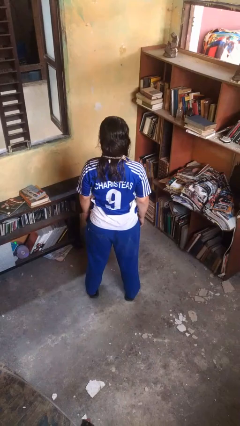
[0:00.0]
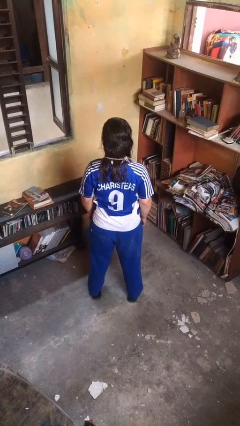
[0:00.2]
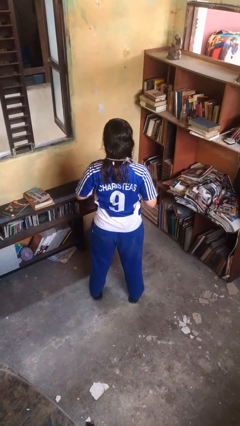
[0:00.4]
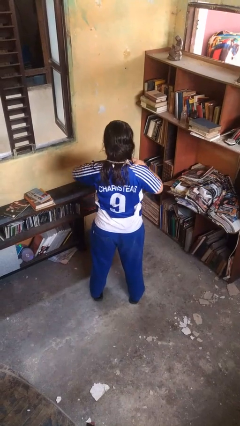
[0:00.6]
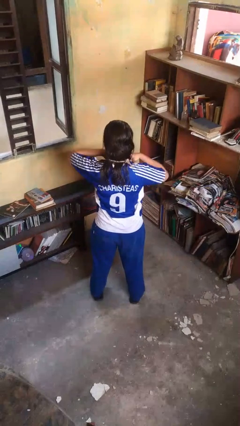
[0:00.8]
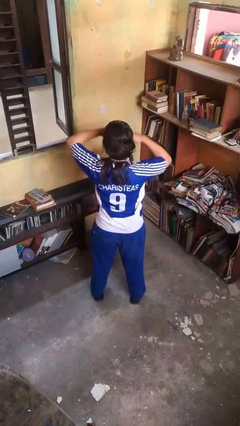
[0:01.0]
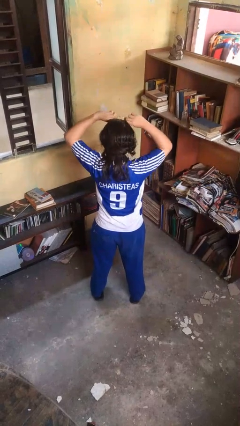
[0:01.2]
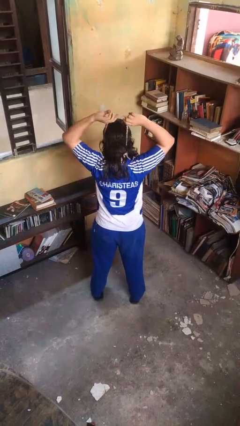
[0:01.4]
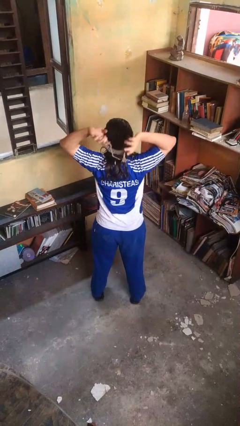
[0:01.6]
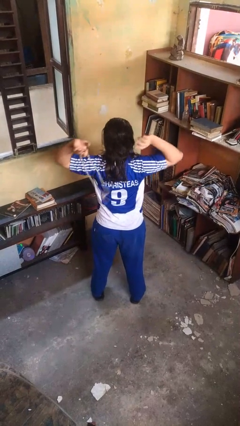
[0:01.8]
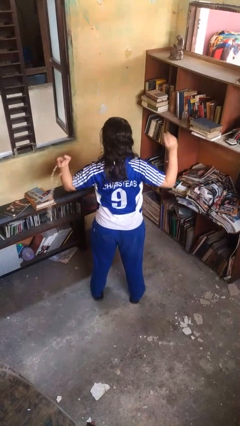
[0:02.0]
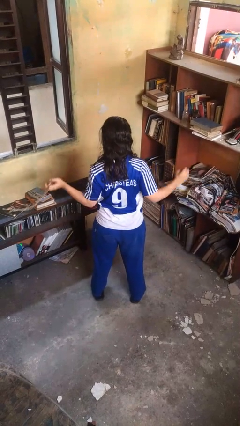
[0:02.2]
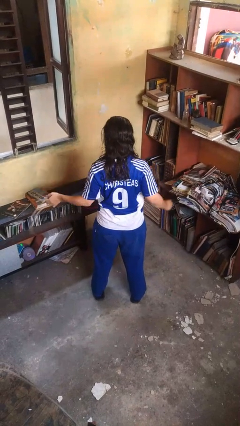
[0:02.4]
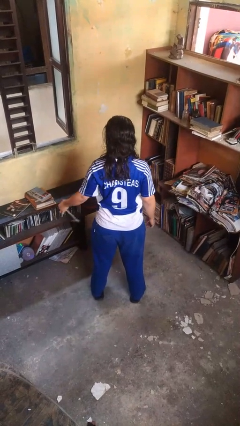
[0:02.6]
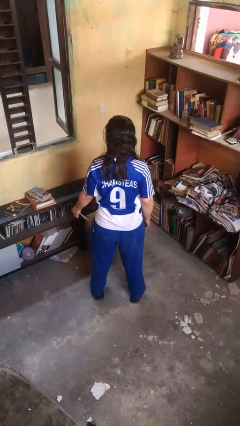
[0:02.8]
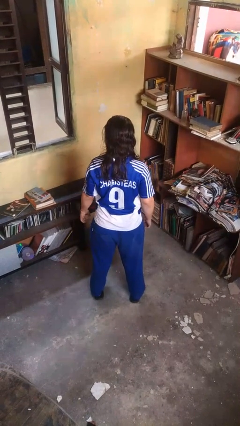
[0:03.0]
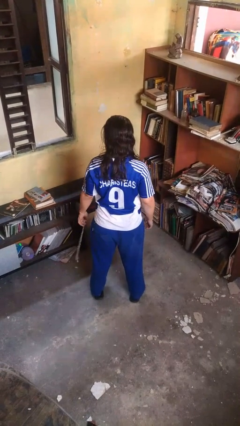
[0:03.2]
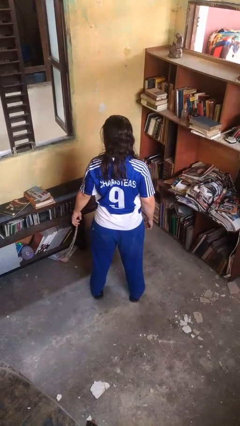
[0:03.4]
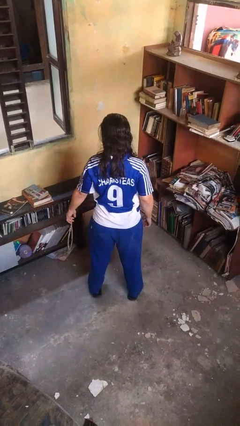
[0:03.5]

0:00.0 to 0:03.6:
person takes off necklace

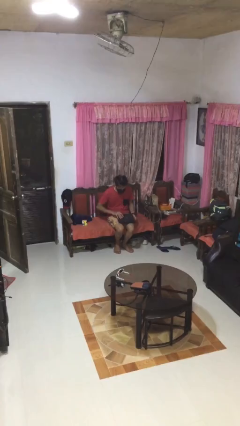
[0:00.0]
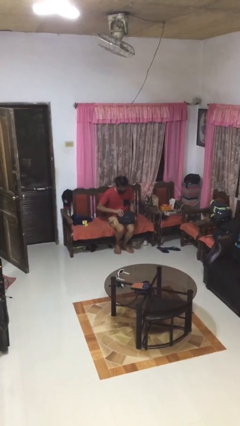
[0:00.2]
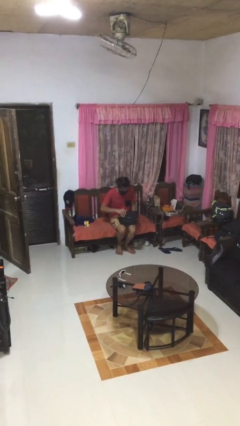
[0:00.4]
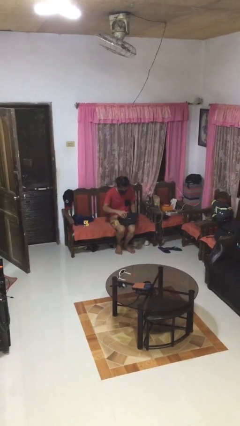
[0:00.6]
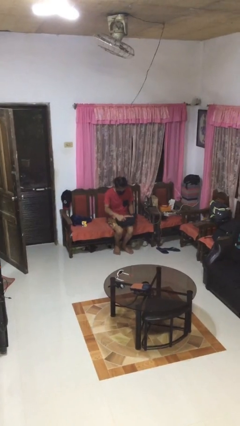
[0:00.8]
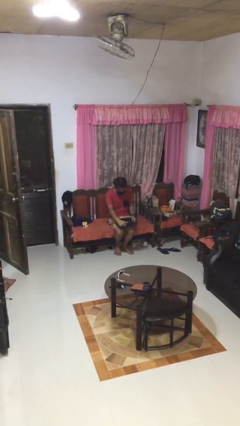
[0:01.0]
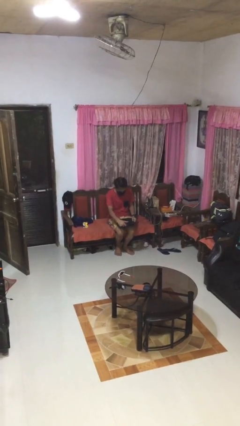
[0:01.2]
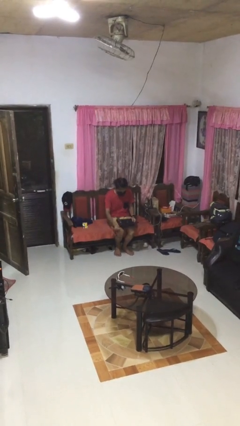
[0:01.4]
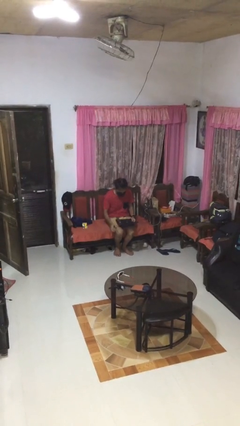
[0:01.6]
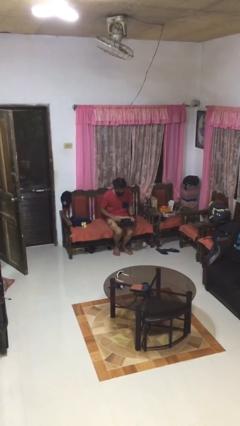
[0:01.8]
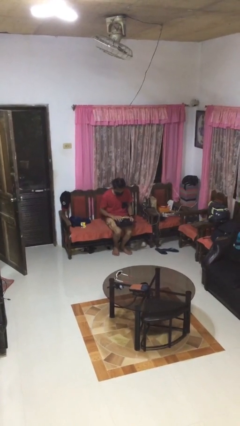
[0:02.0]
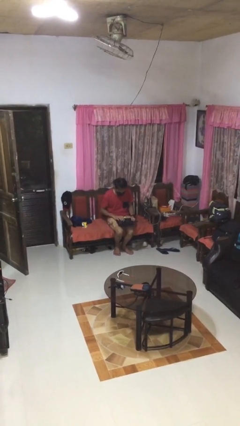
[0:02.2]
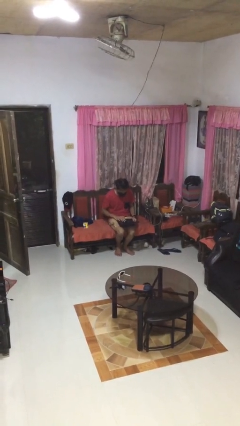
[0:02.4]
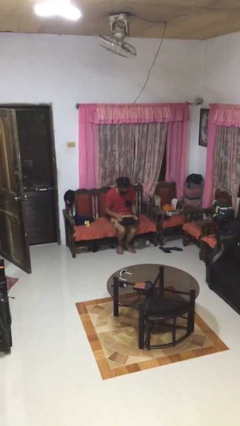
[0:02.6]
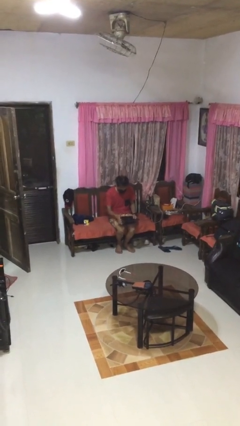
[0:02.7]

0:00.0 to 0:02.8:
person opens laptop

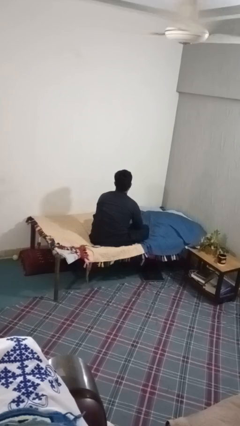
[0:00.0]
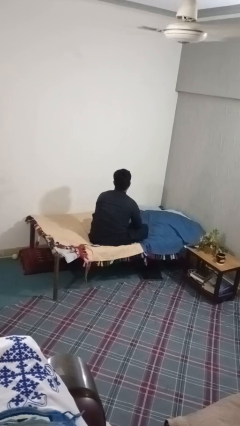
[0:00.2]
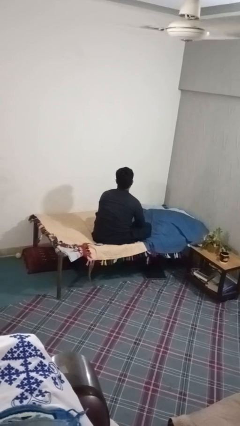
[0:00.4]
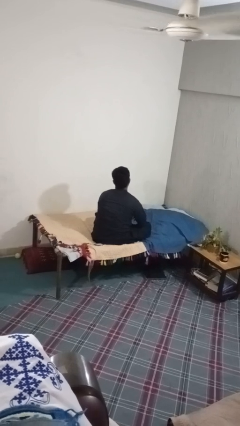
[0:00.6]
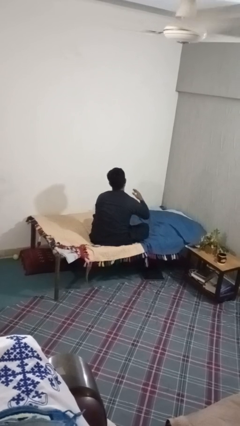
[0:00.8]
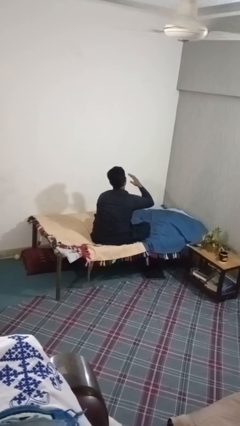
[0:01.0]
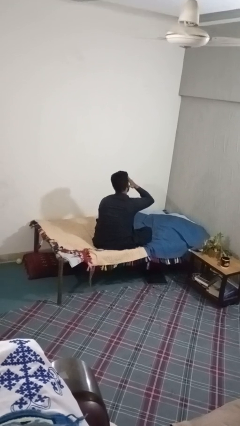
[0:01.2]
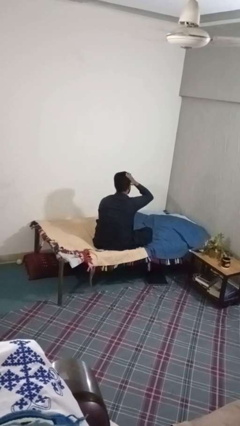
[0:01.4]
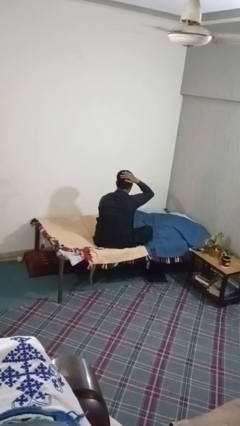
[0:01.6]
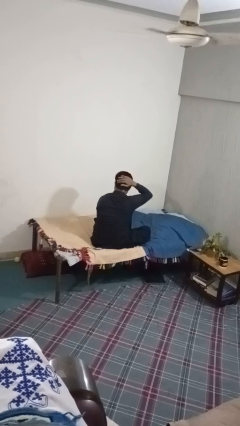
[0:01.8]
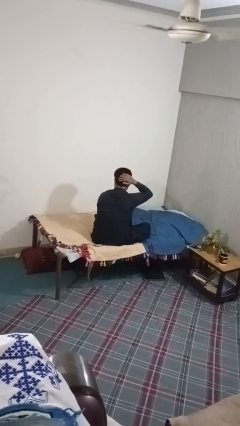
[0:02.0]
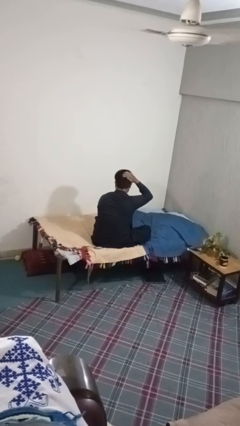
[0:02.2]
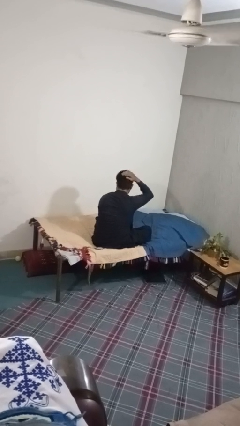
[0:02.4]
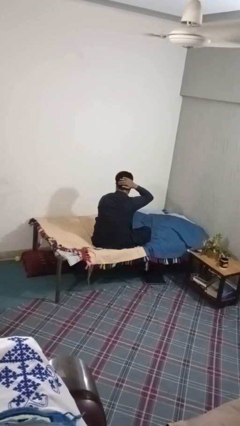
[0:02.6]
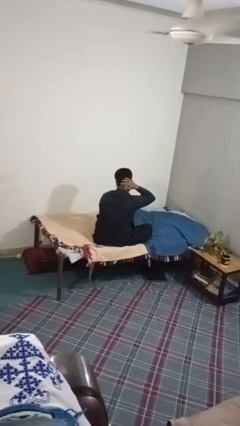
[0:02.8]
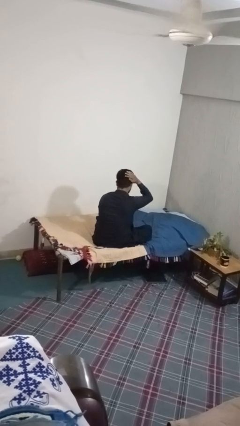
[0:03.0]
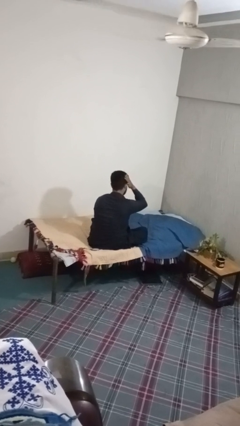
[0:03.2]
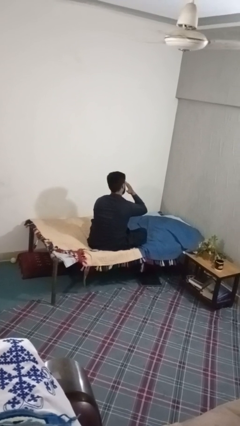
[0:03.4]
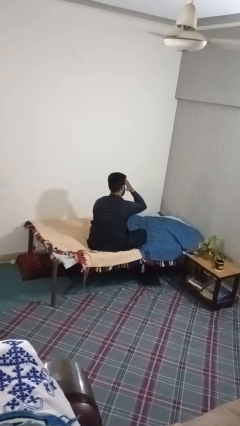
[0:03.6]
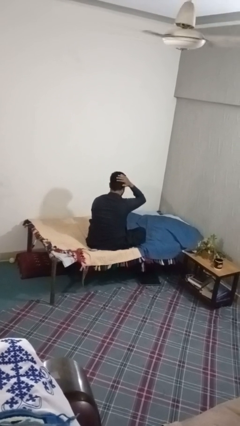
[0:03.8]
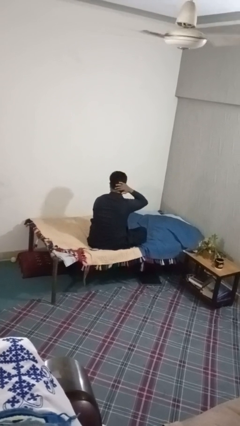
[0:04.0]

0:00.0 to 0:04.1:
person strokes hair

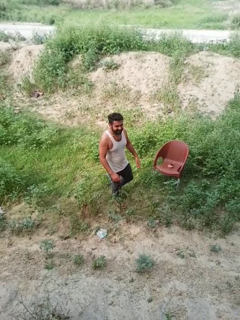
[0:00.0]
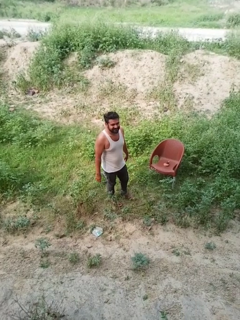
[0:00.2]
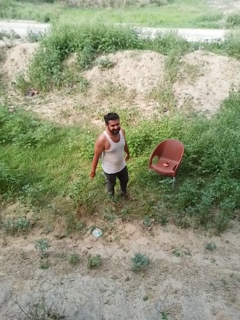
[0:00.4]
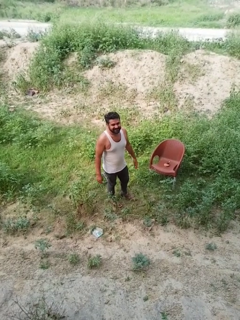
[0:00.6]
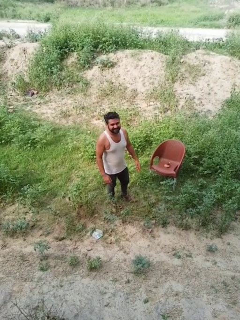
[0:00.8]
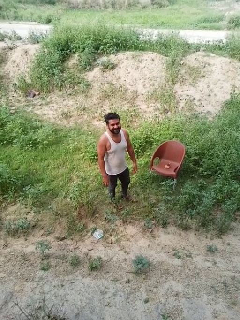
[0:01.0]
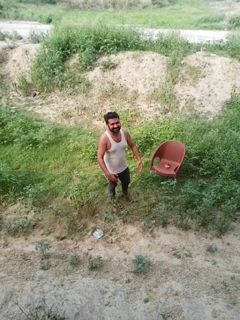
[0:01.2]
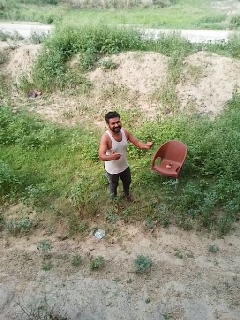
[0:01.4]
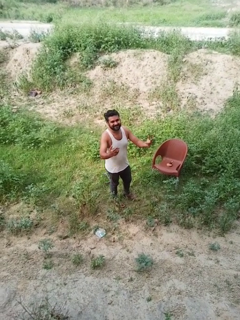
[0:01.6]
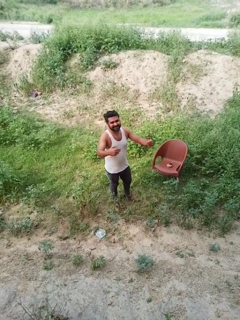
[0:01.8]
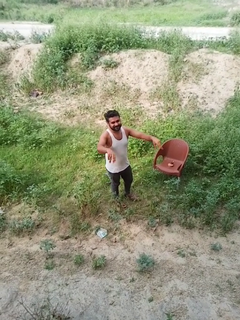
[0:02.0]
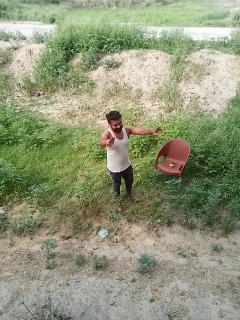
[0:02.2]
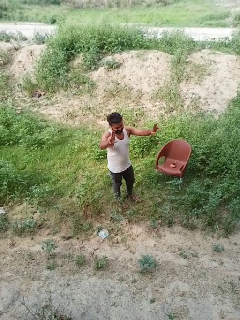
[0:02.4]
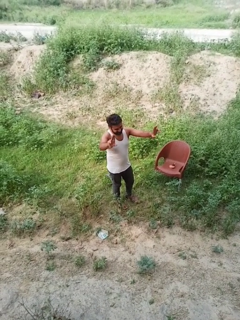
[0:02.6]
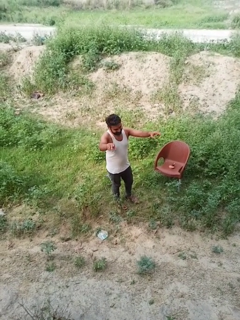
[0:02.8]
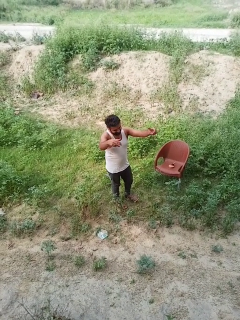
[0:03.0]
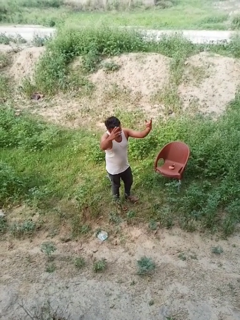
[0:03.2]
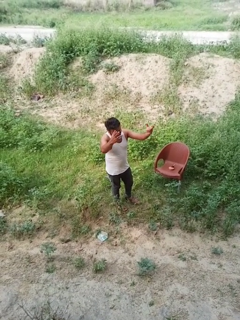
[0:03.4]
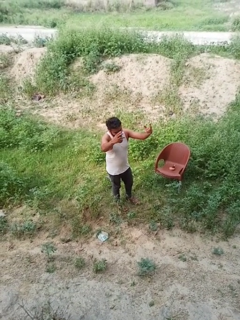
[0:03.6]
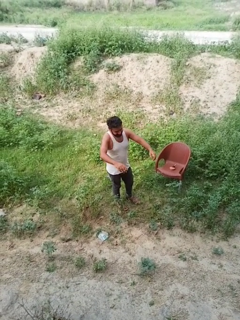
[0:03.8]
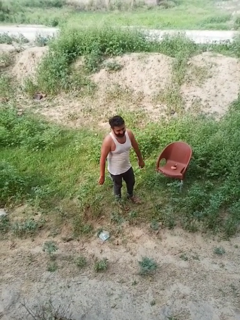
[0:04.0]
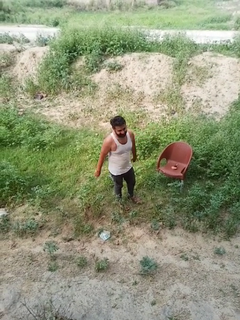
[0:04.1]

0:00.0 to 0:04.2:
person dances in place

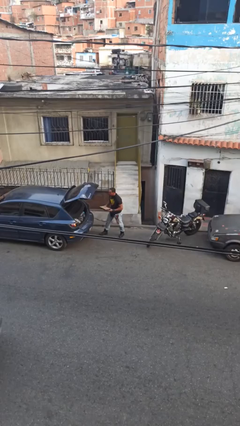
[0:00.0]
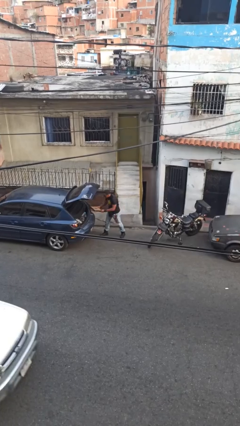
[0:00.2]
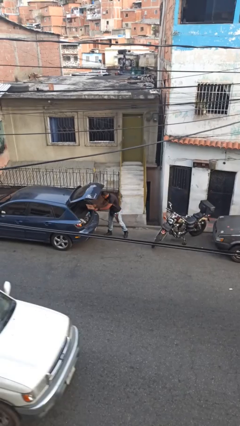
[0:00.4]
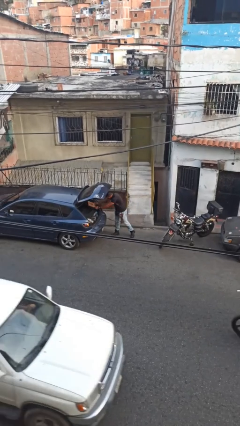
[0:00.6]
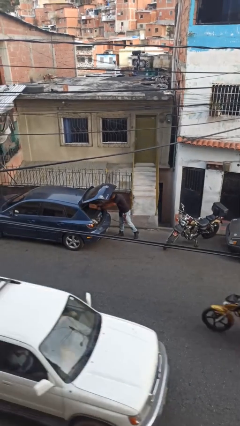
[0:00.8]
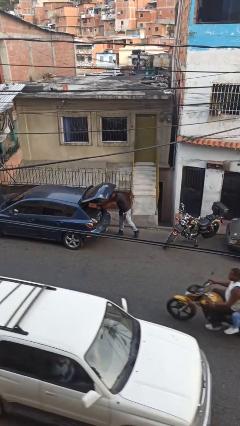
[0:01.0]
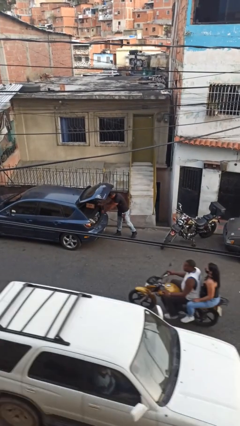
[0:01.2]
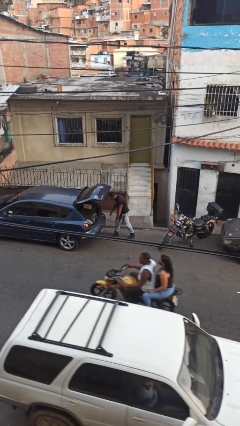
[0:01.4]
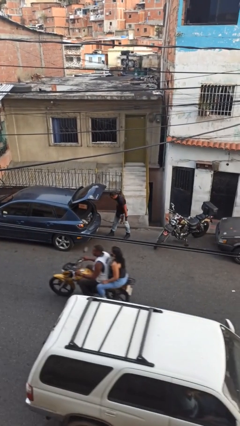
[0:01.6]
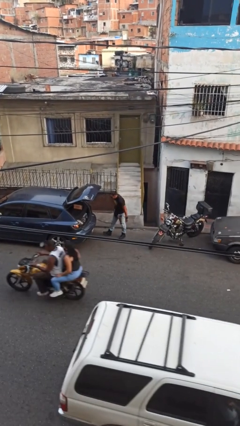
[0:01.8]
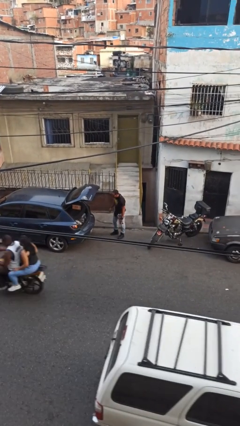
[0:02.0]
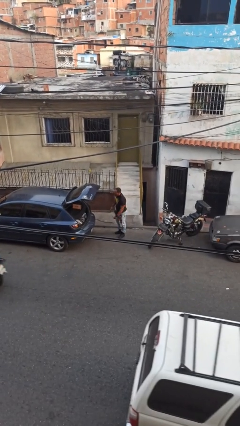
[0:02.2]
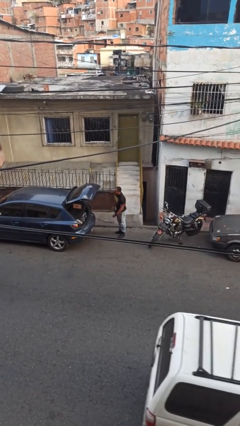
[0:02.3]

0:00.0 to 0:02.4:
person loads car

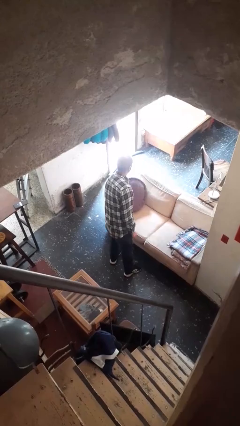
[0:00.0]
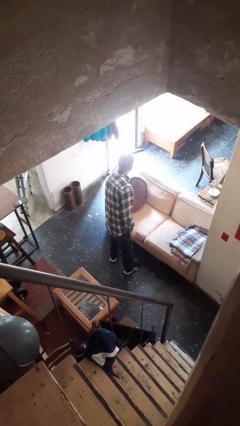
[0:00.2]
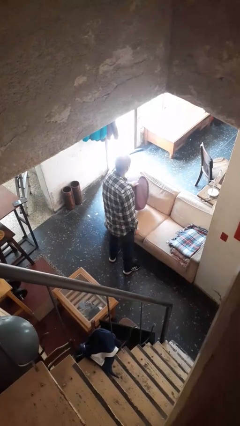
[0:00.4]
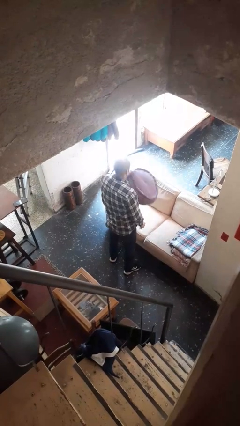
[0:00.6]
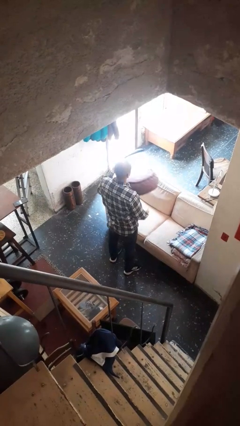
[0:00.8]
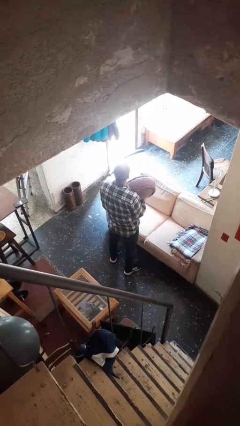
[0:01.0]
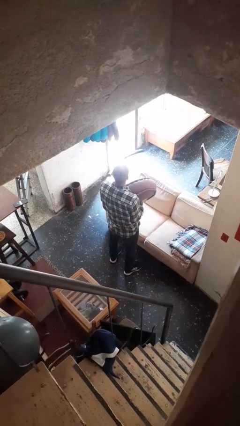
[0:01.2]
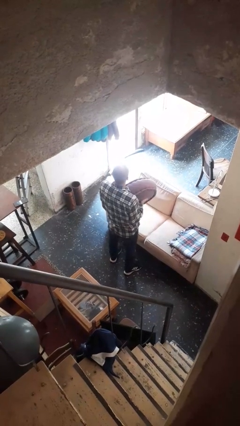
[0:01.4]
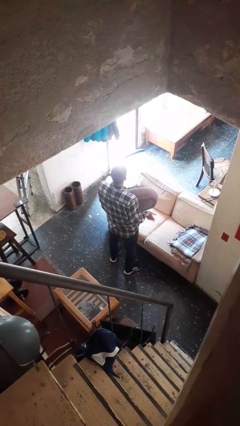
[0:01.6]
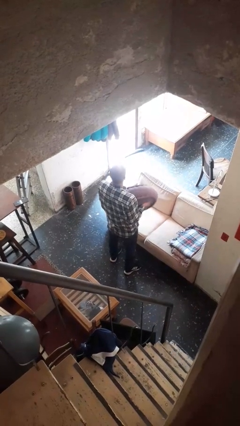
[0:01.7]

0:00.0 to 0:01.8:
person picks up object from couch
